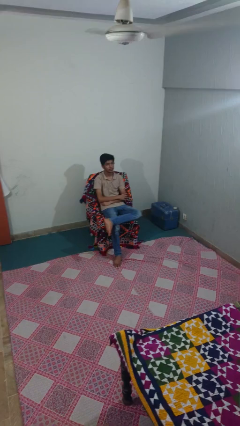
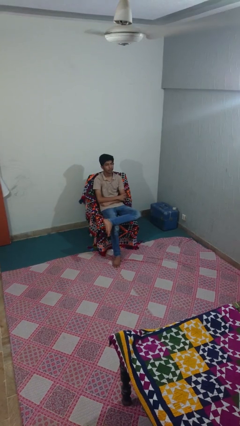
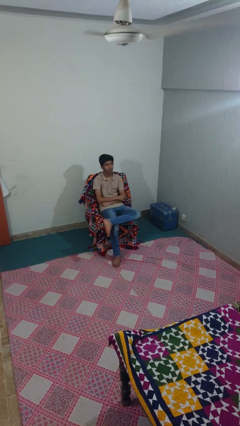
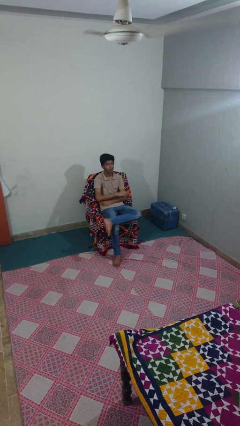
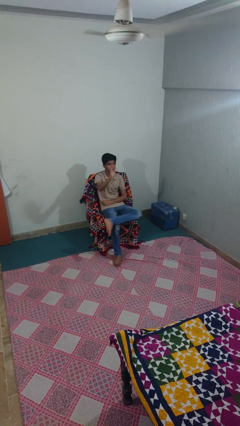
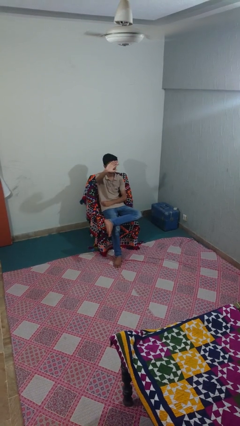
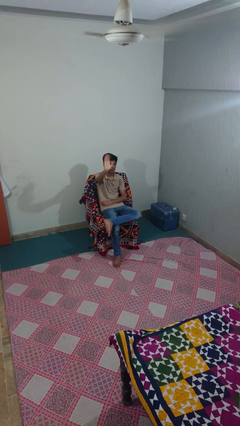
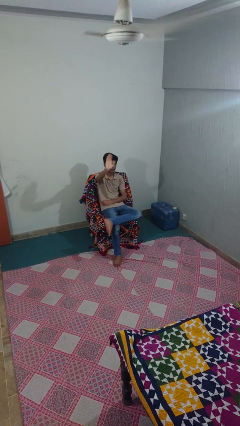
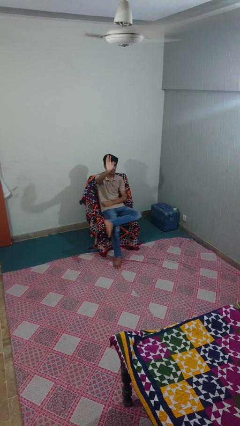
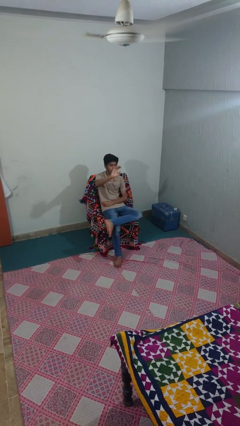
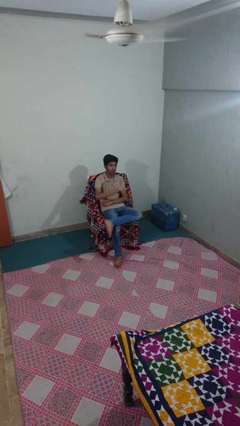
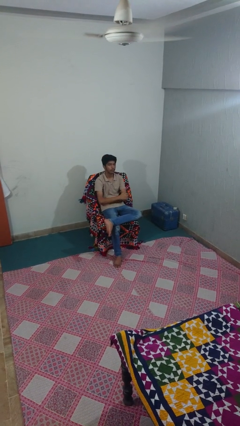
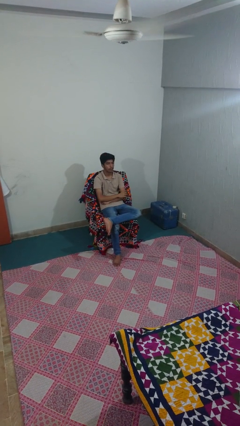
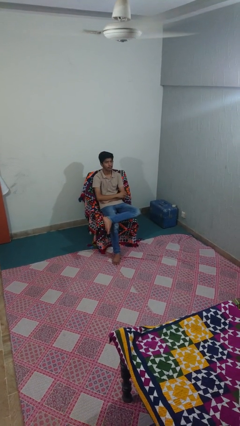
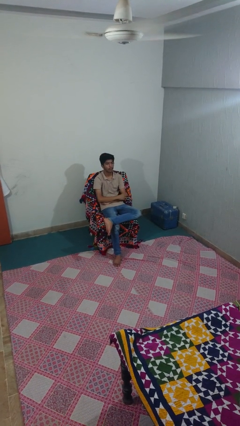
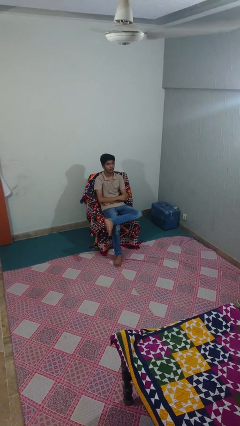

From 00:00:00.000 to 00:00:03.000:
person waves at person

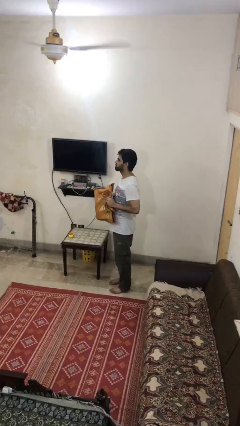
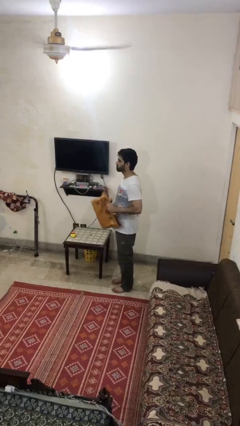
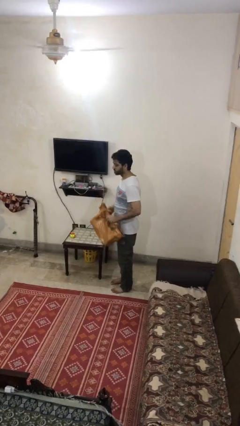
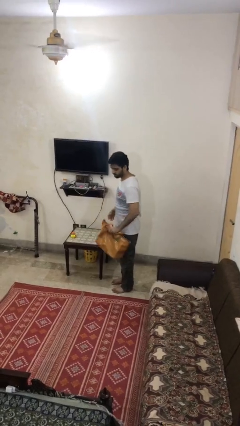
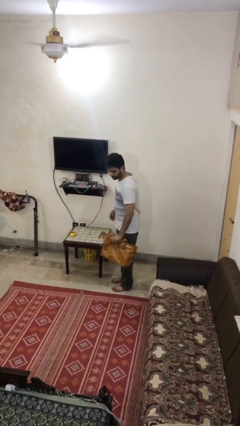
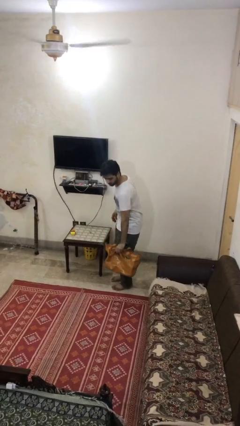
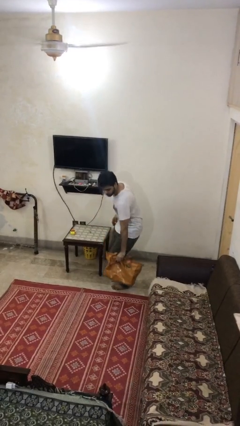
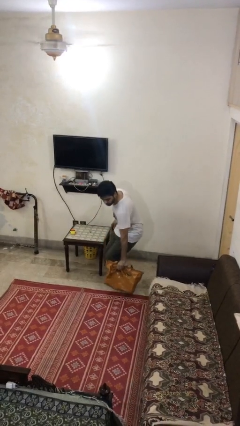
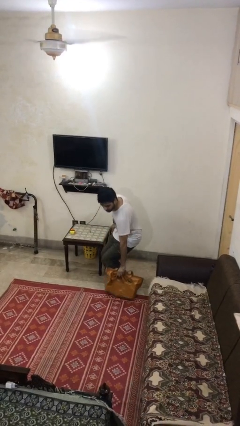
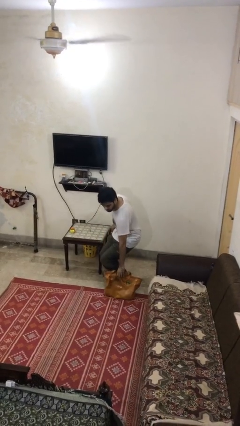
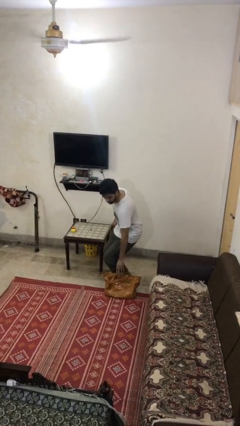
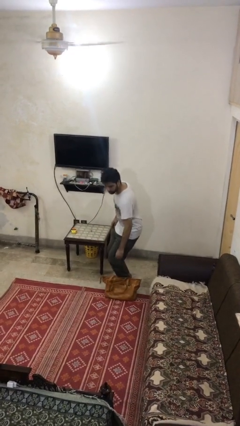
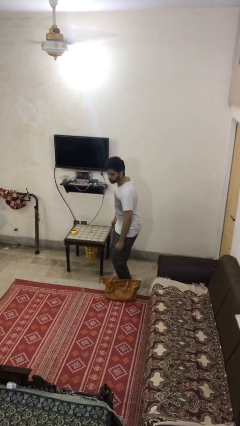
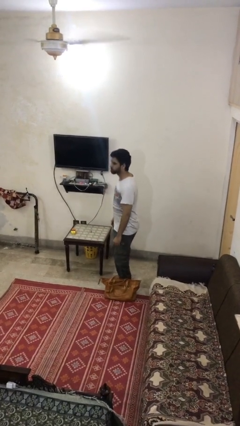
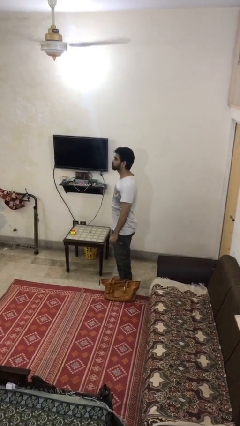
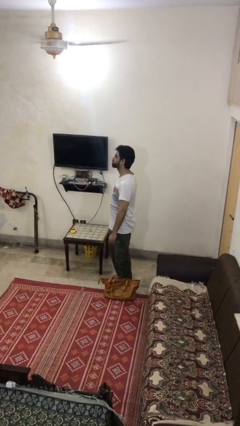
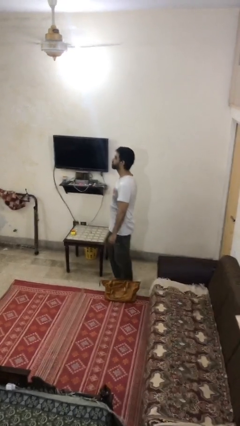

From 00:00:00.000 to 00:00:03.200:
person puts down object on floor

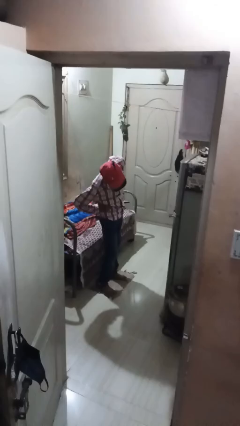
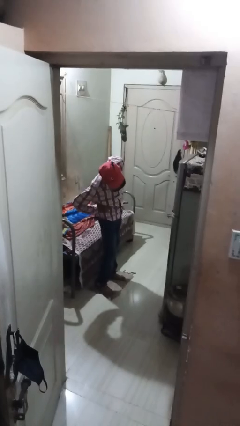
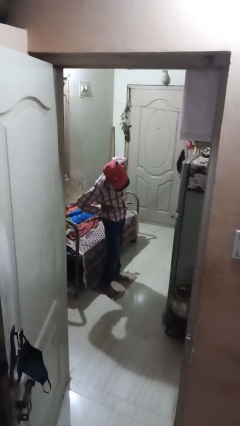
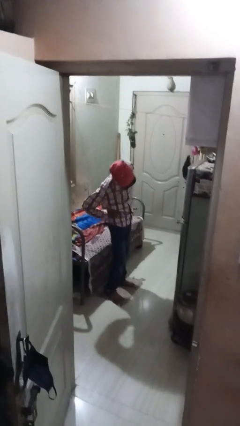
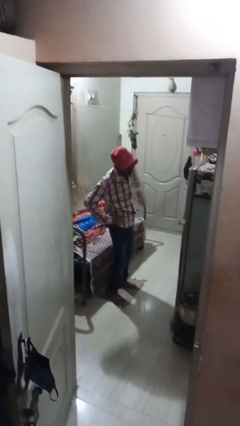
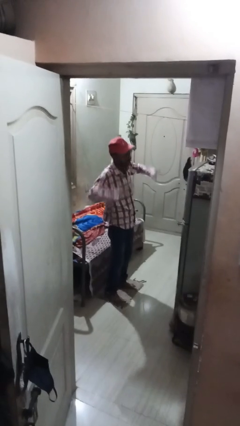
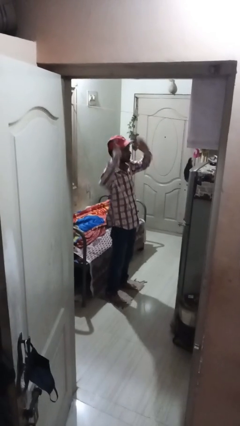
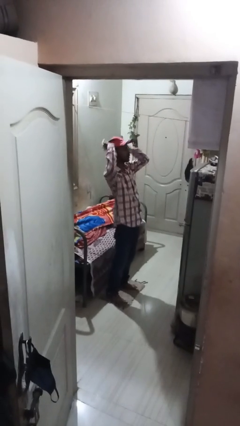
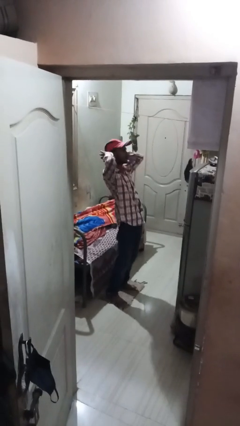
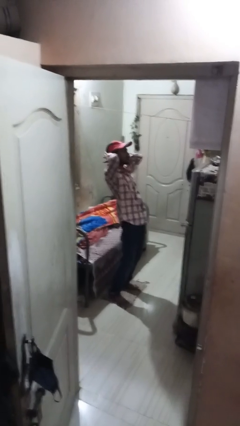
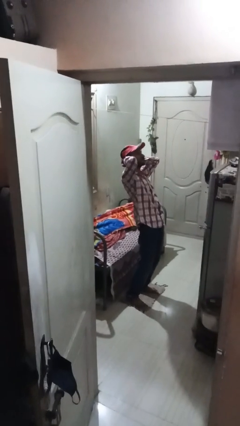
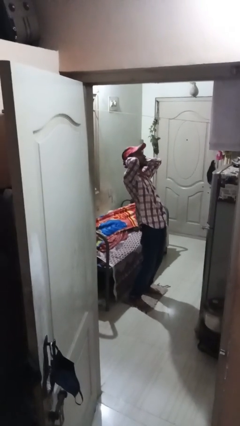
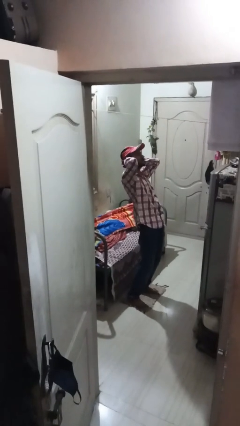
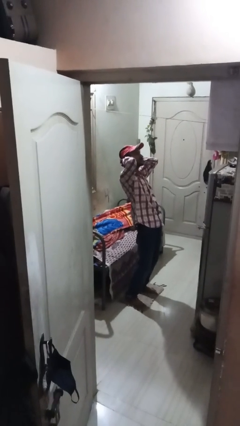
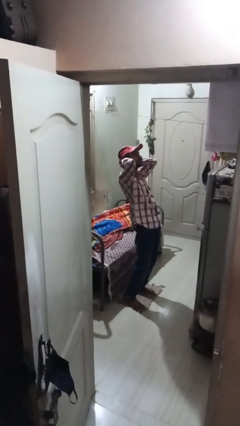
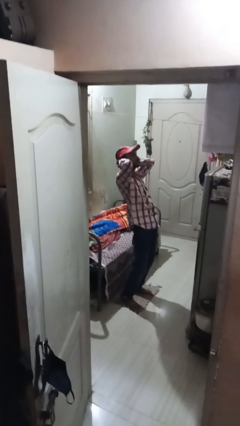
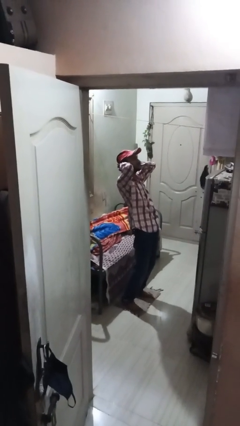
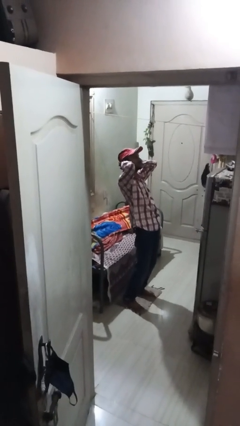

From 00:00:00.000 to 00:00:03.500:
person stretches arms over head

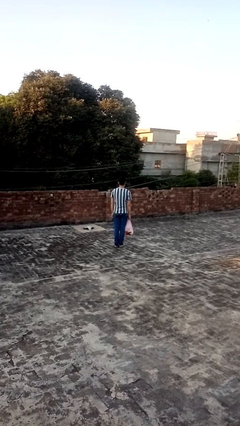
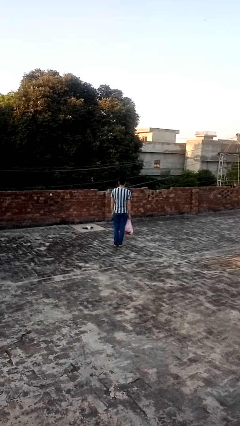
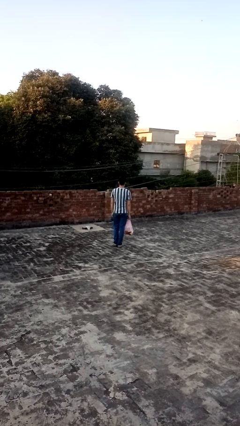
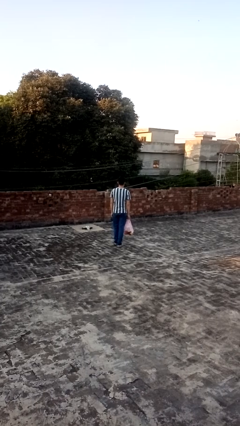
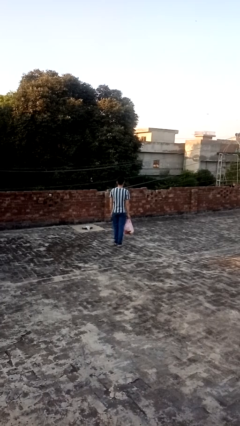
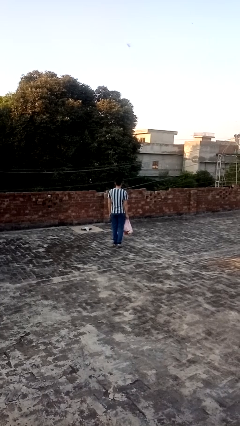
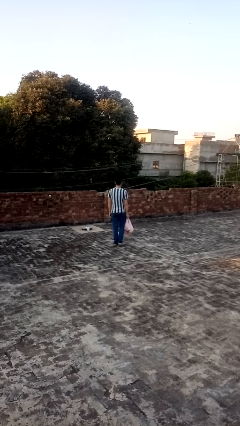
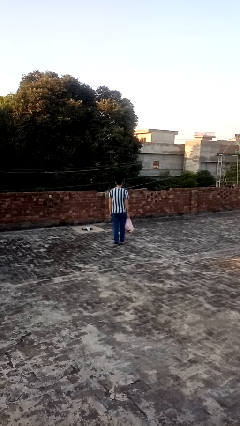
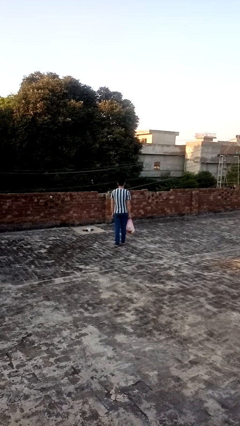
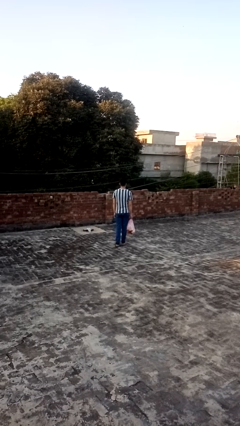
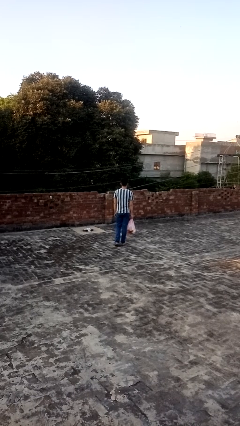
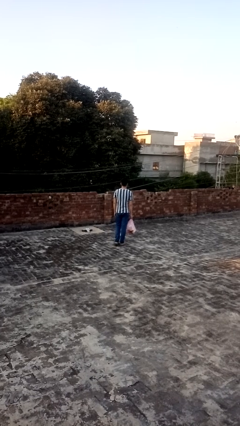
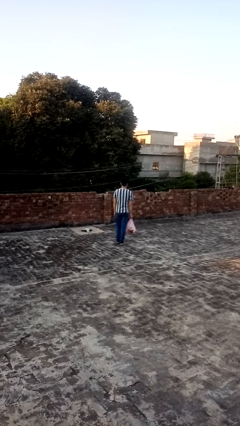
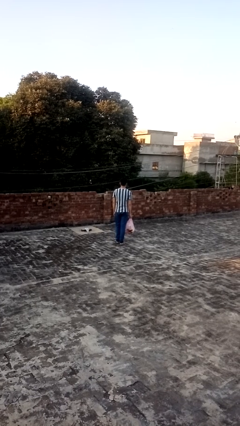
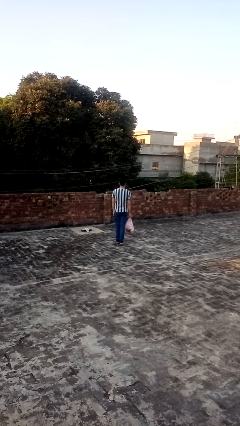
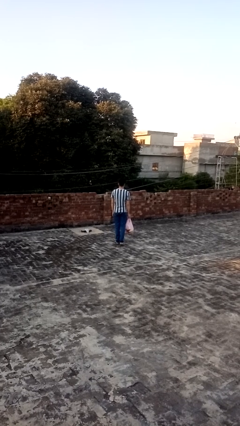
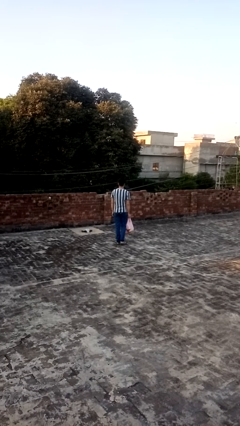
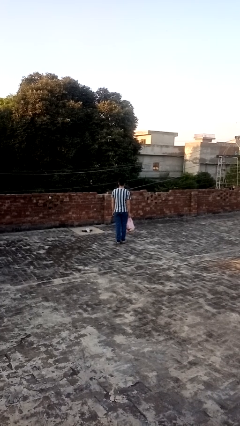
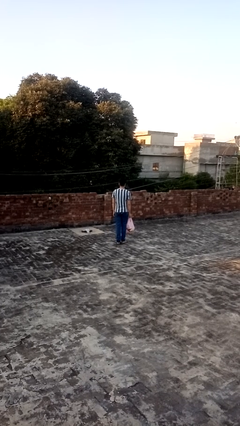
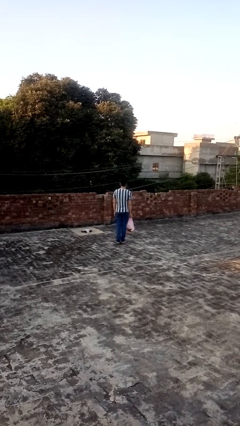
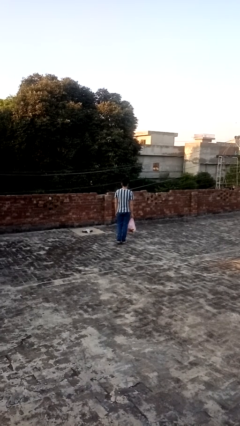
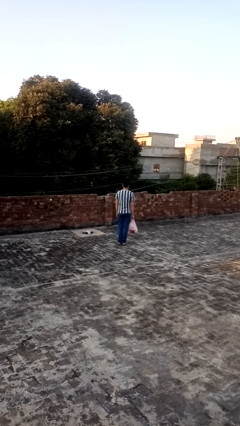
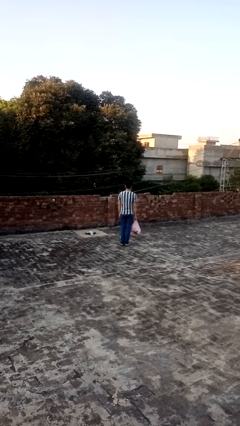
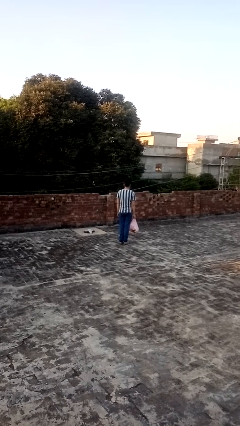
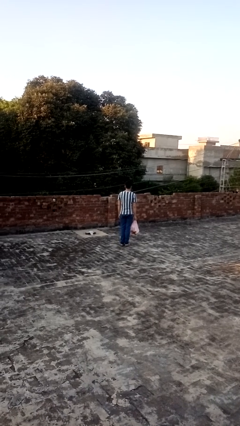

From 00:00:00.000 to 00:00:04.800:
person carries groceries

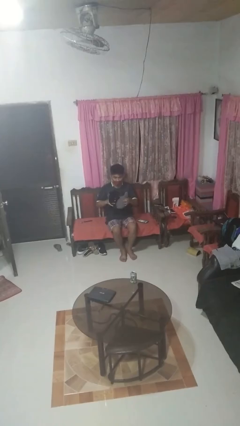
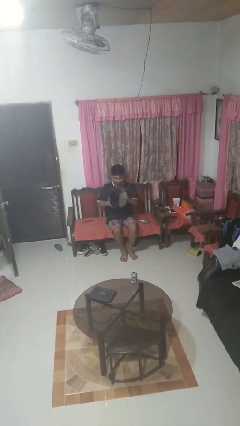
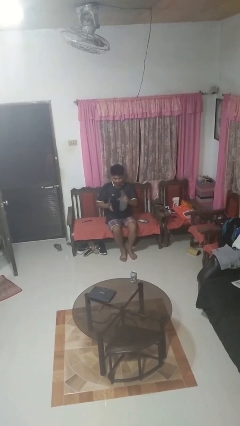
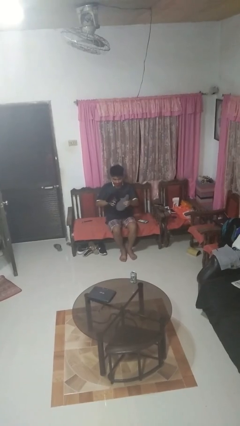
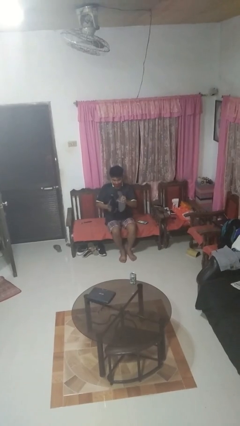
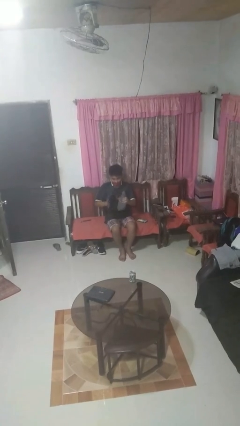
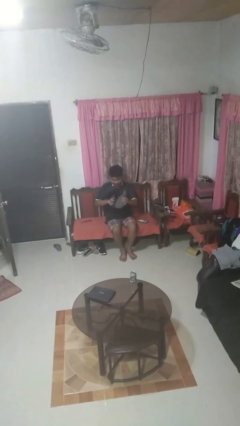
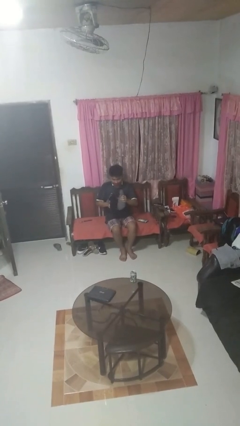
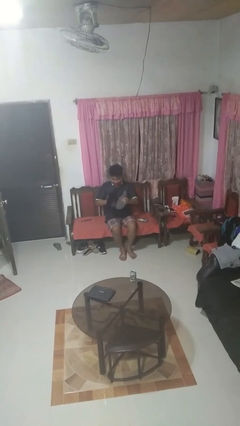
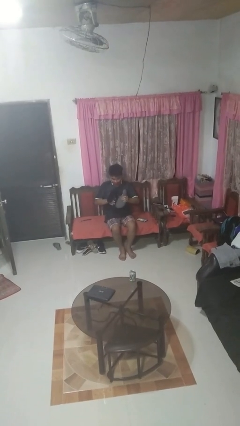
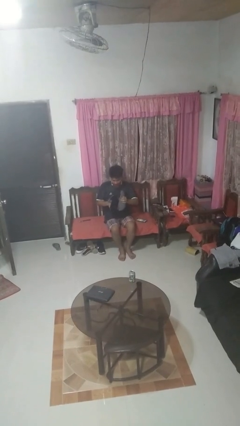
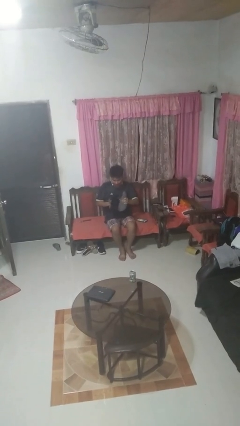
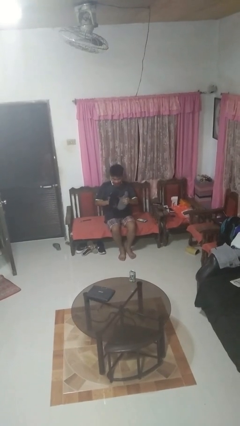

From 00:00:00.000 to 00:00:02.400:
person squeezes object

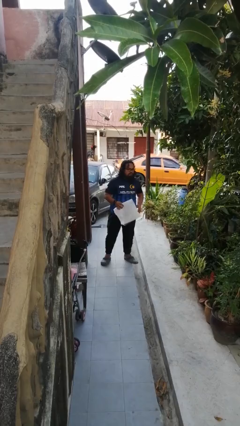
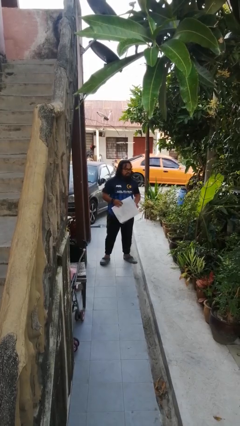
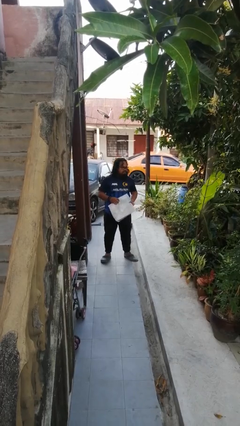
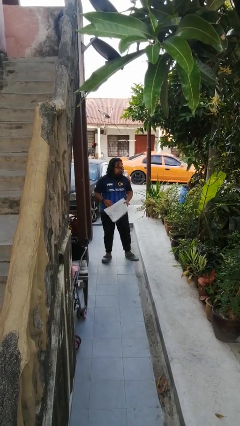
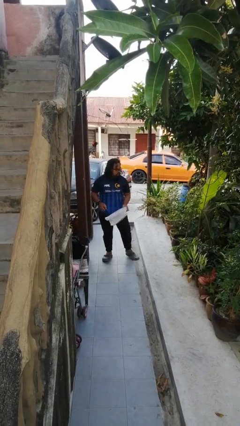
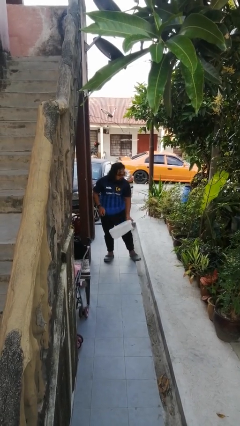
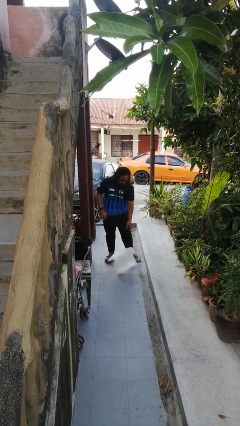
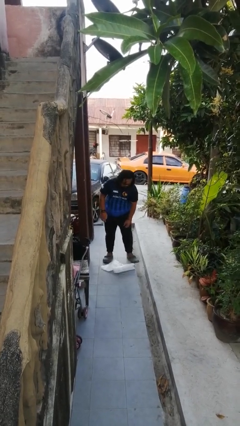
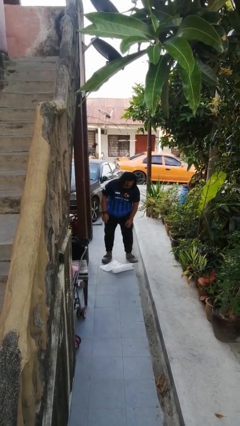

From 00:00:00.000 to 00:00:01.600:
person drops object
